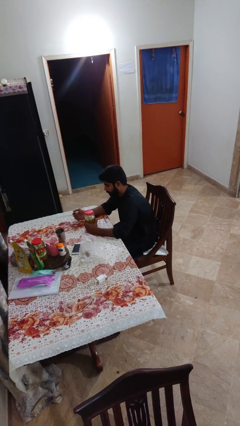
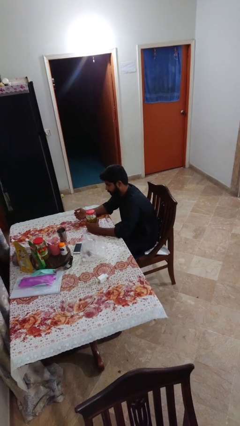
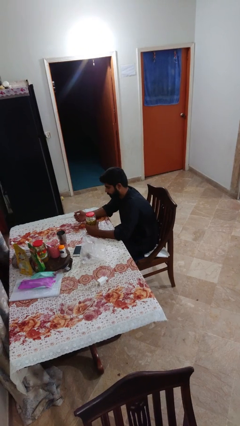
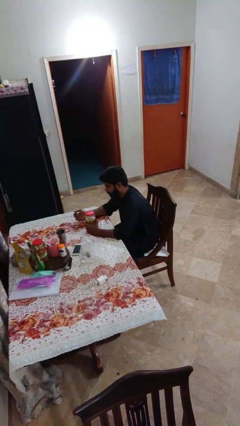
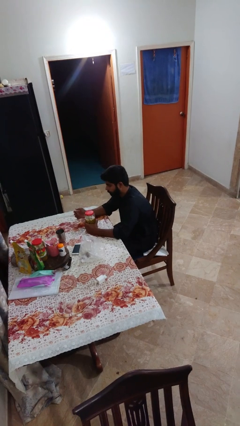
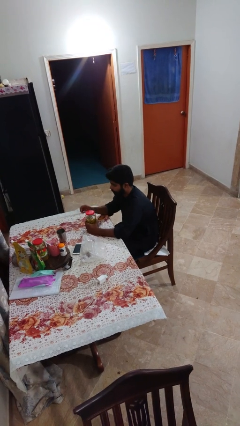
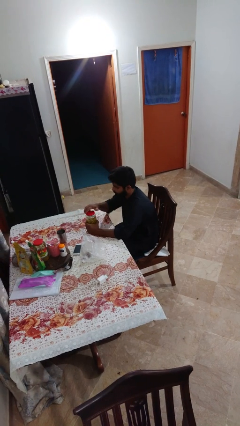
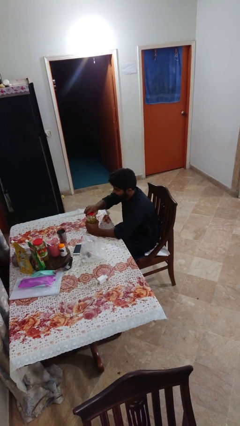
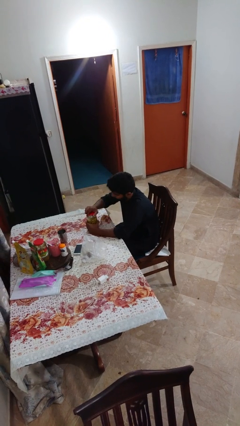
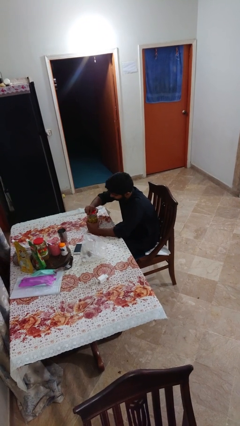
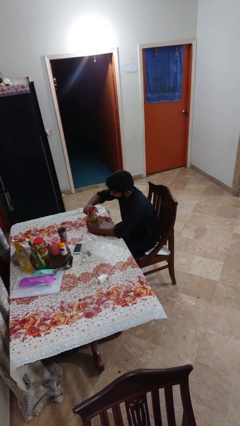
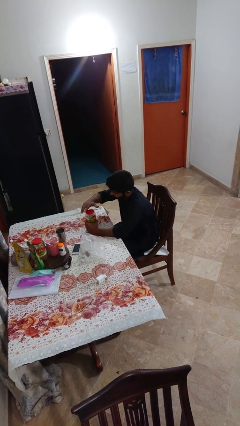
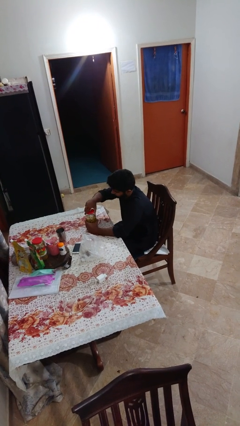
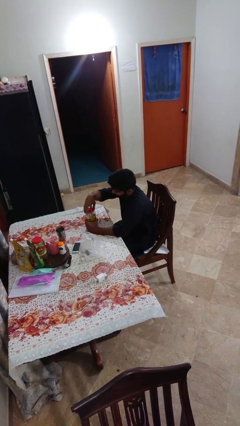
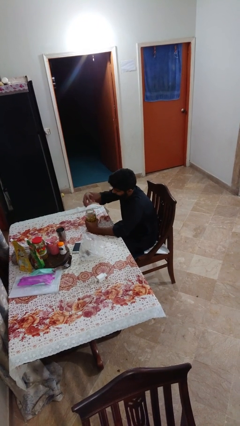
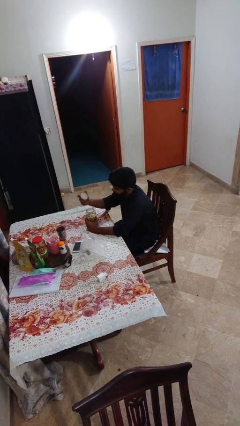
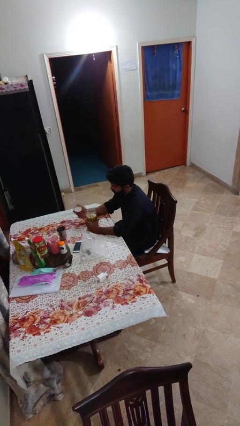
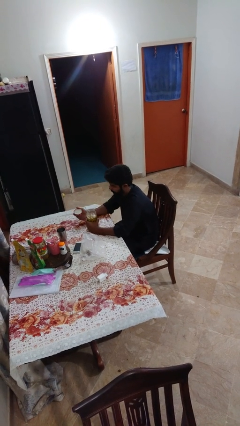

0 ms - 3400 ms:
person opens jar

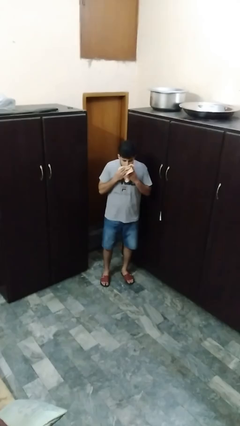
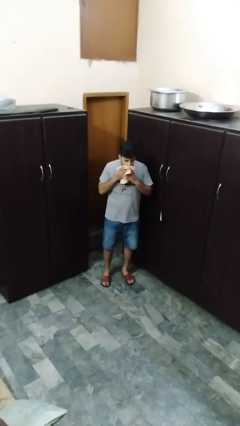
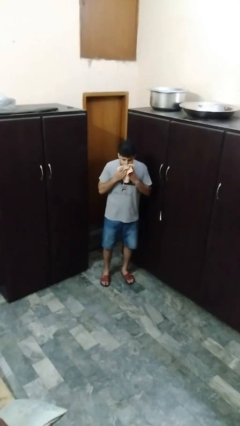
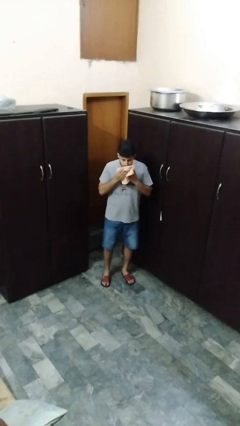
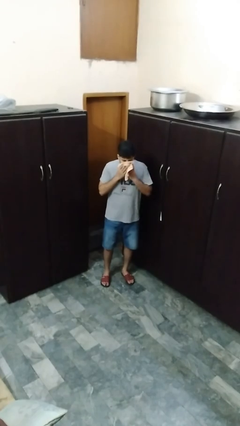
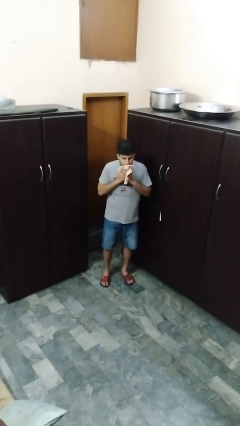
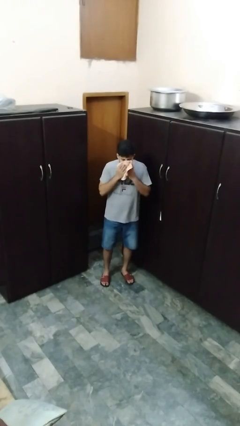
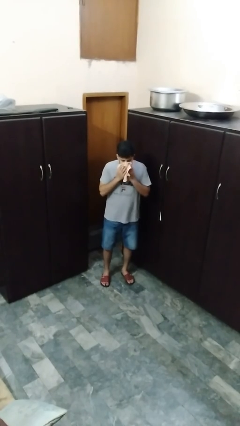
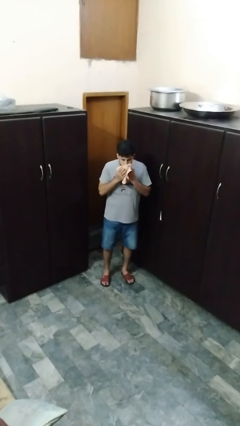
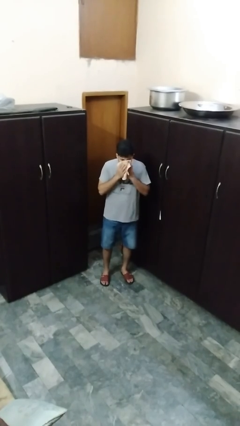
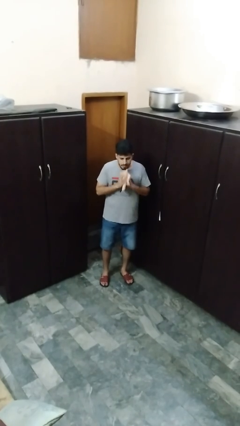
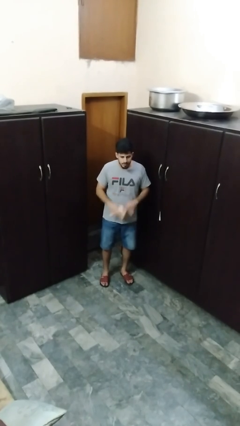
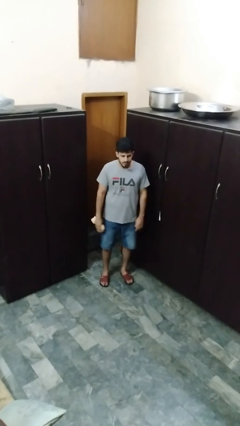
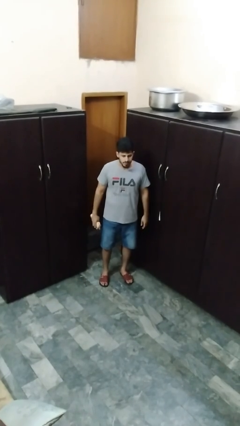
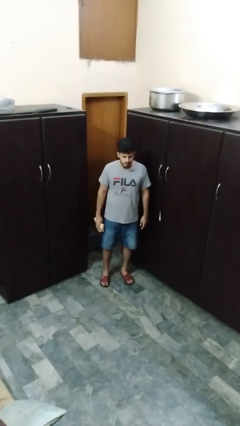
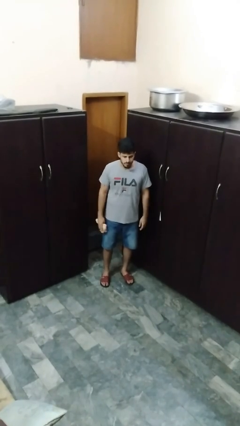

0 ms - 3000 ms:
person wipes mouth with napkin

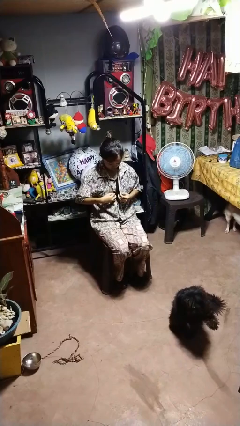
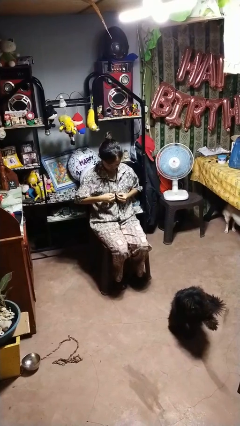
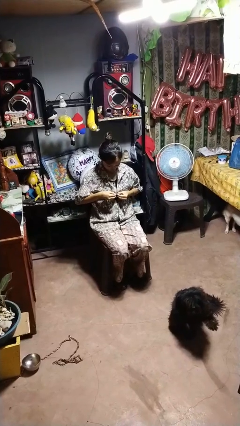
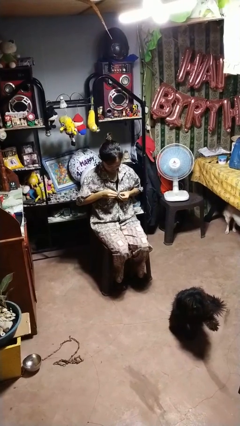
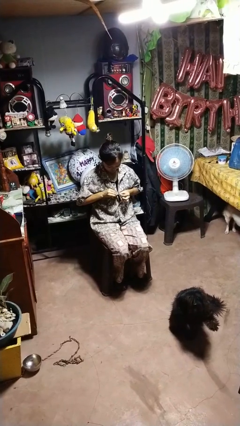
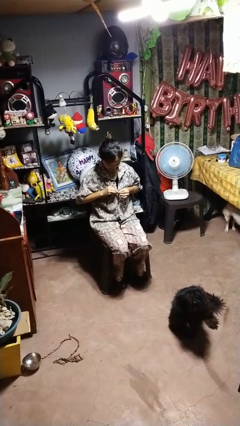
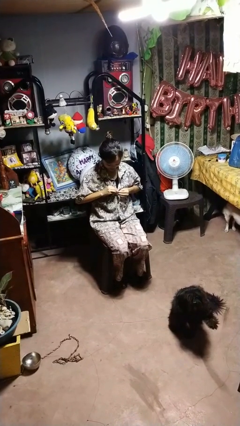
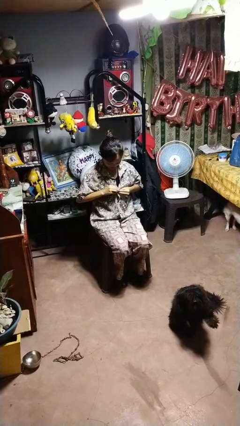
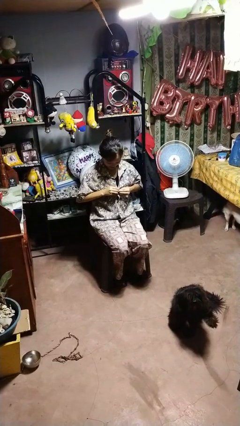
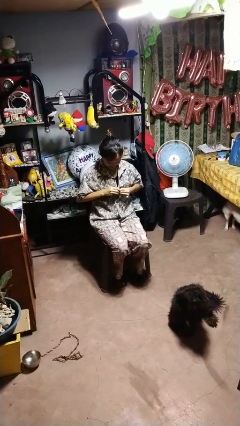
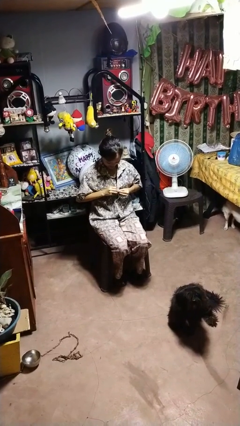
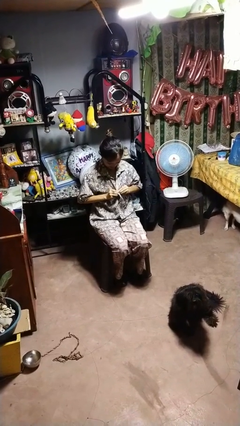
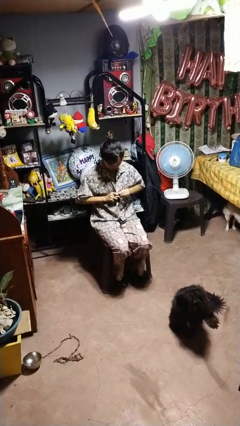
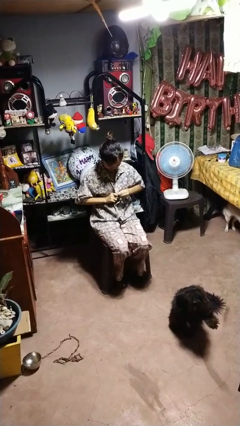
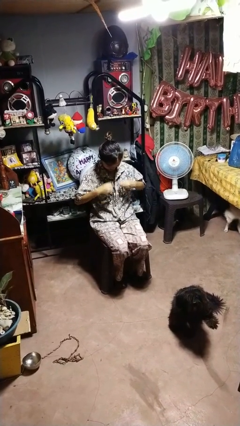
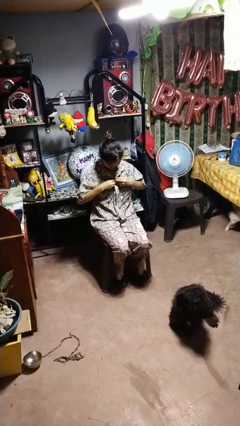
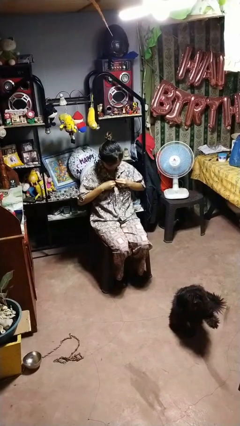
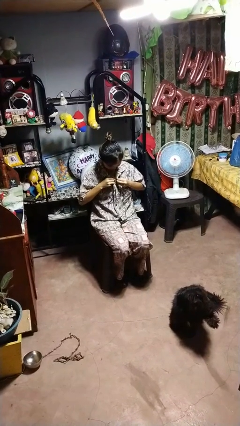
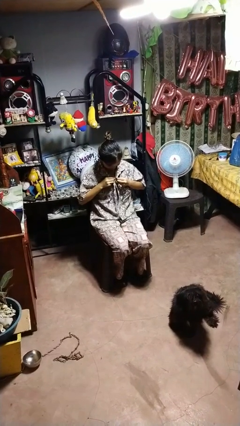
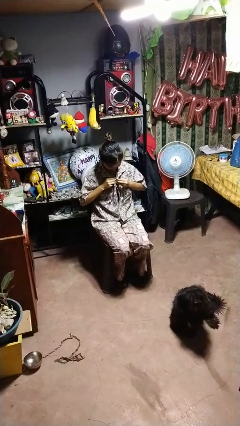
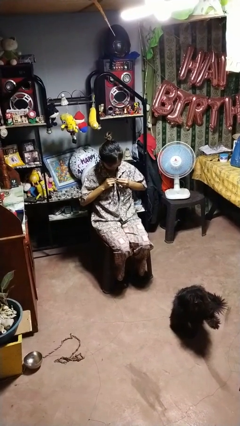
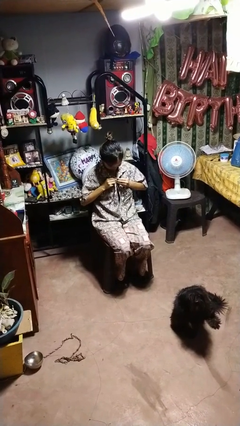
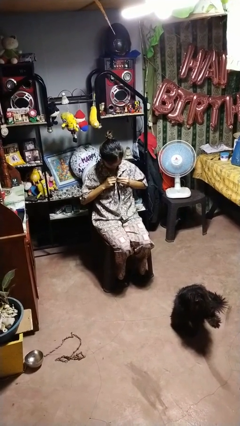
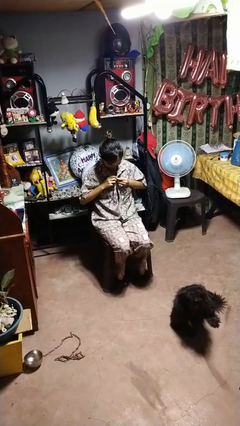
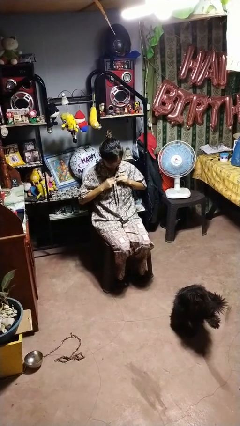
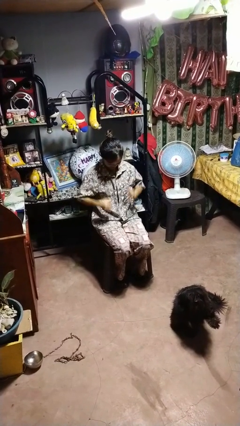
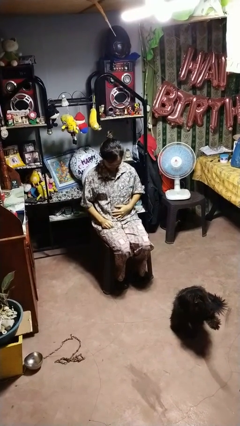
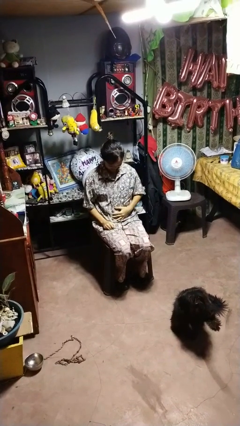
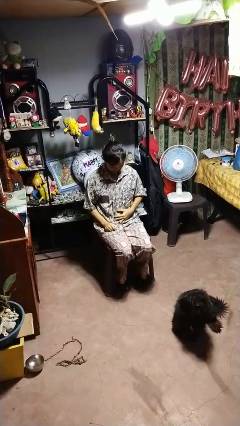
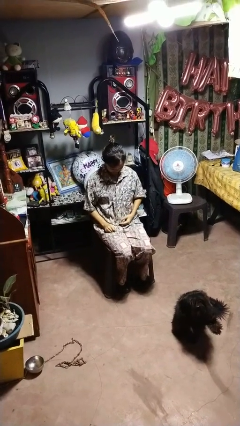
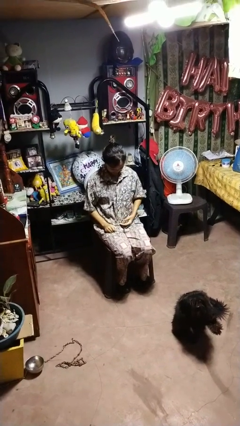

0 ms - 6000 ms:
person buttons shirt

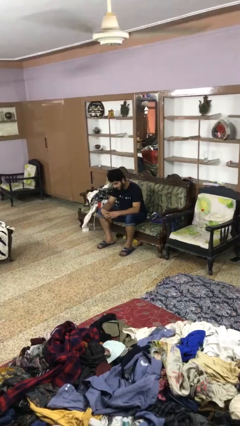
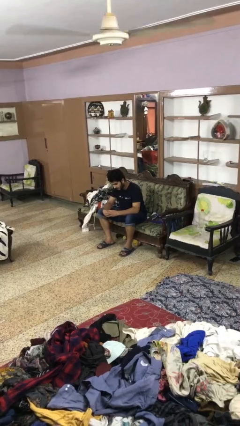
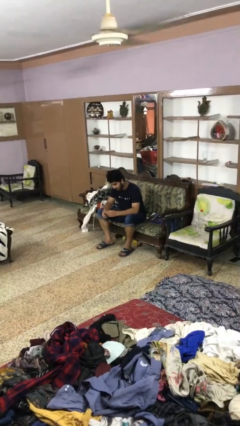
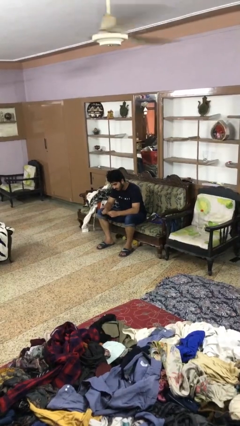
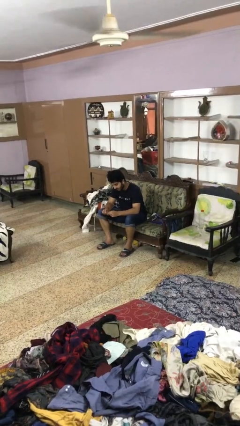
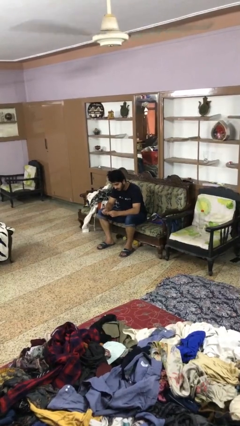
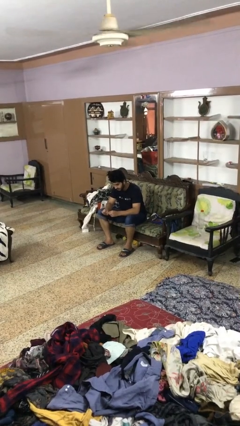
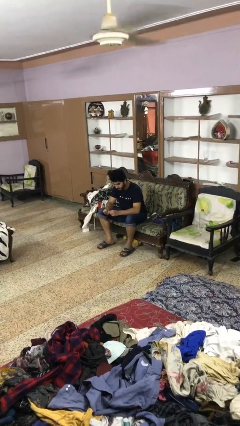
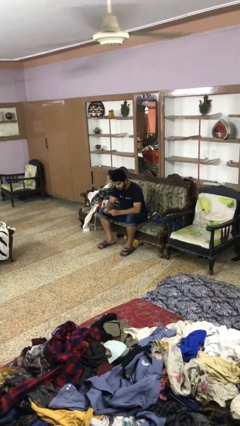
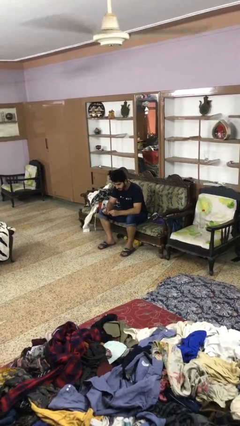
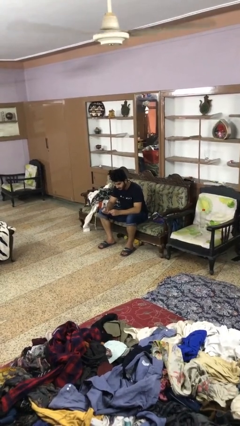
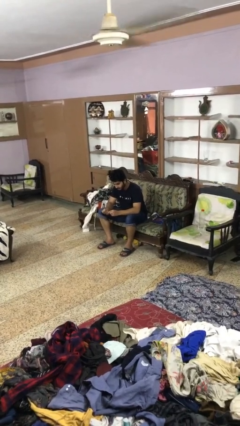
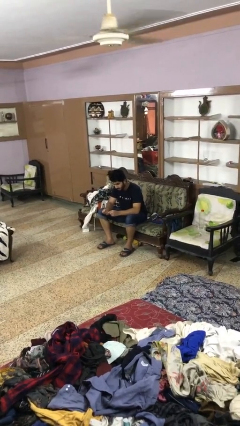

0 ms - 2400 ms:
person files fingernails

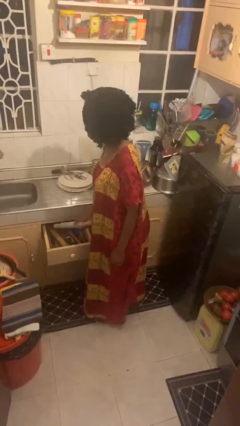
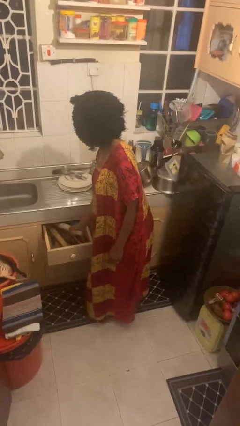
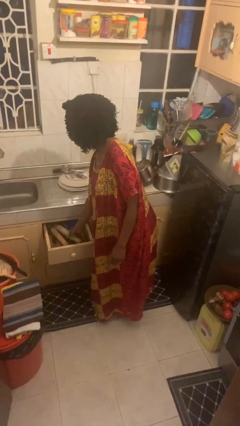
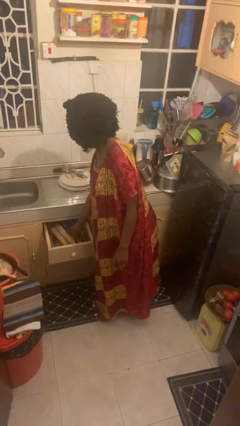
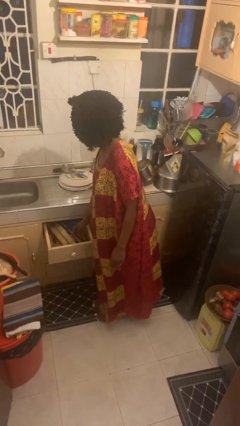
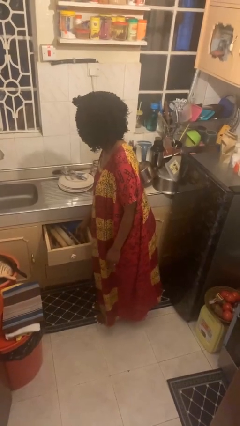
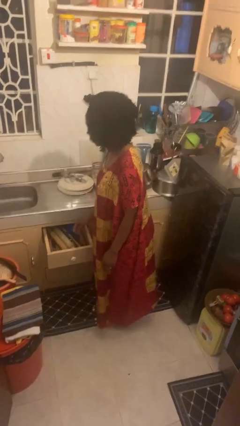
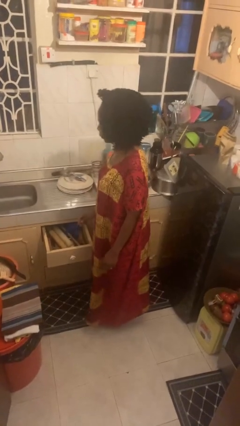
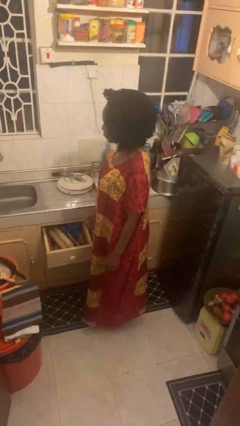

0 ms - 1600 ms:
person puts object into kitchen drawer

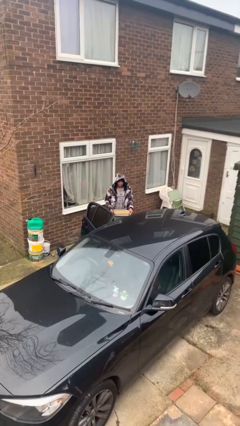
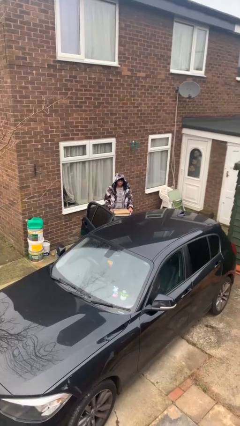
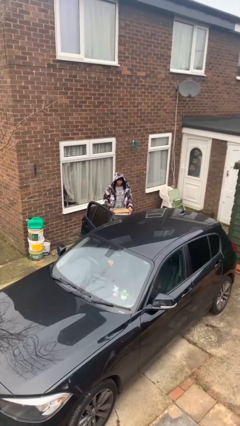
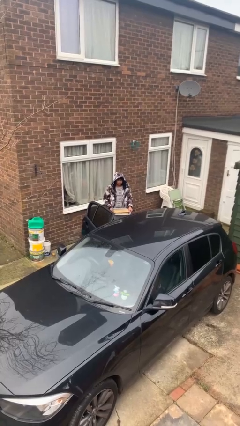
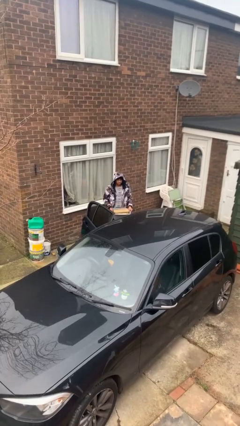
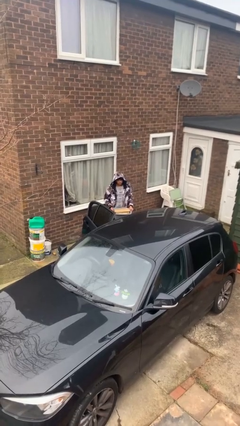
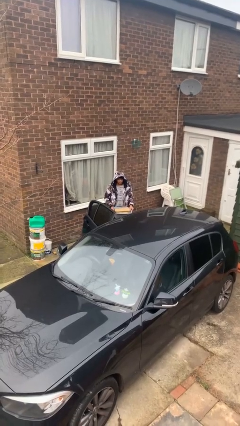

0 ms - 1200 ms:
person loads car
